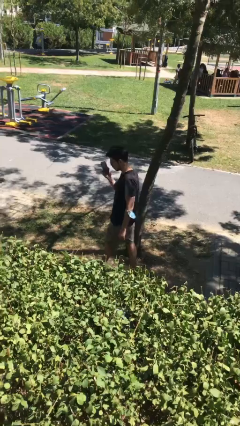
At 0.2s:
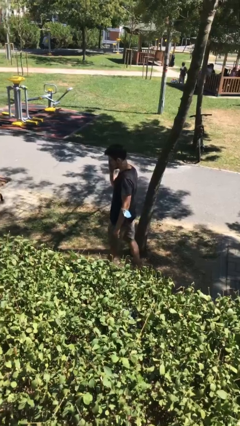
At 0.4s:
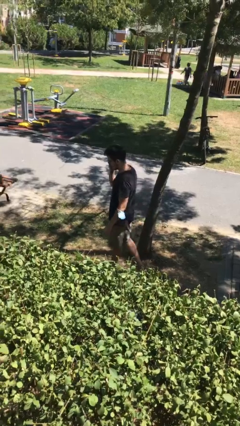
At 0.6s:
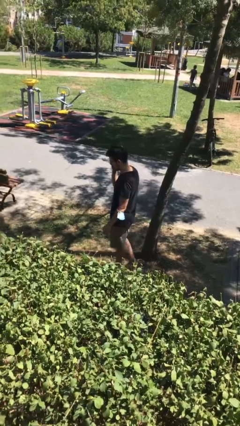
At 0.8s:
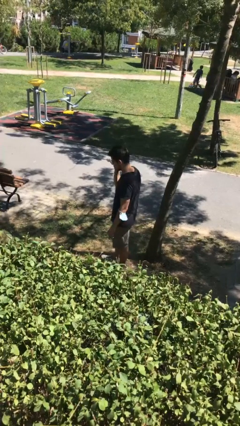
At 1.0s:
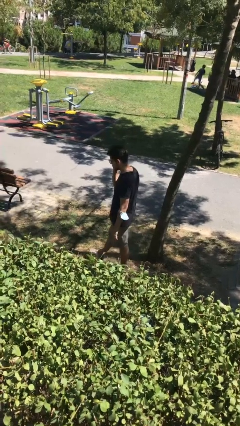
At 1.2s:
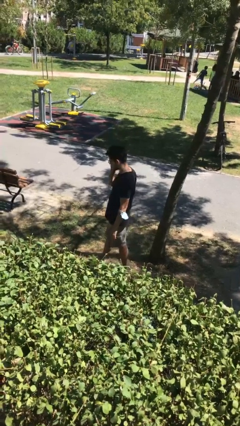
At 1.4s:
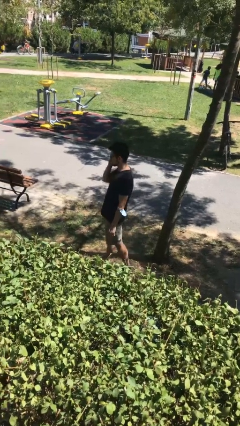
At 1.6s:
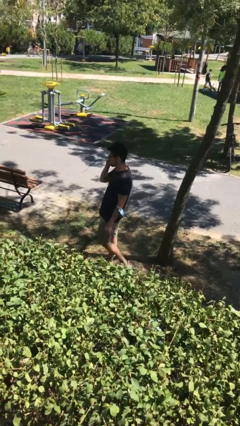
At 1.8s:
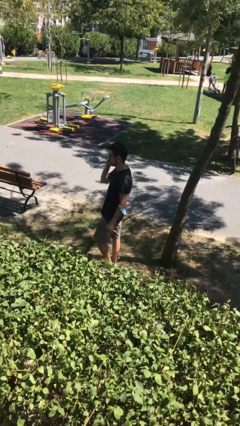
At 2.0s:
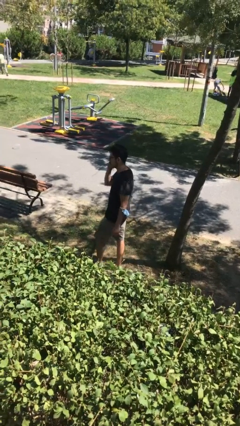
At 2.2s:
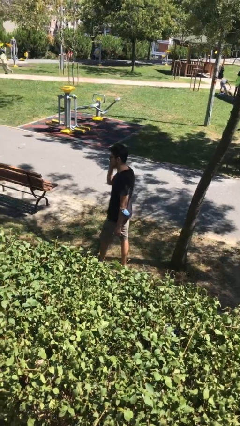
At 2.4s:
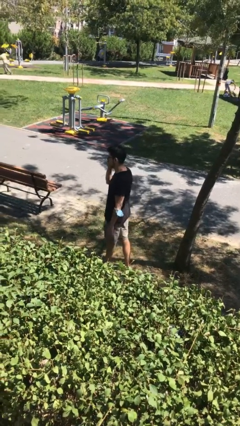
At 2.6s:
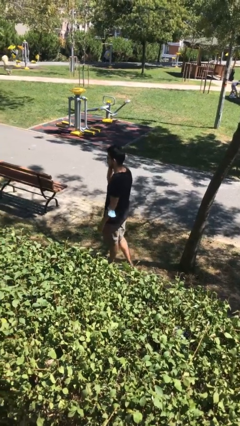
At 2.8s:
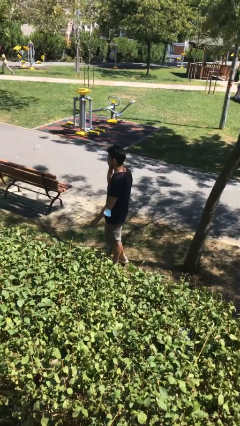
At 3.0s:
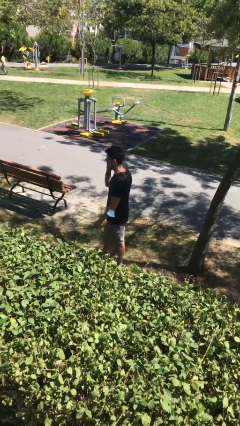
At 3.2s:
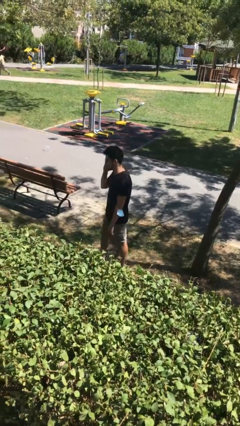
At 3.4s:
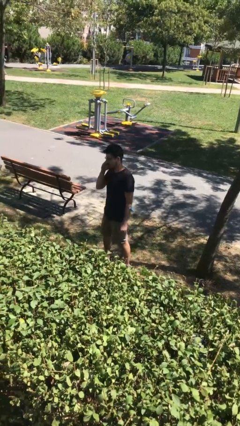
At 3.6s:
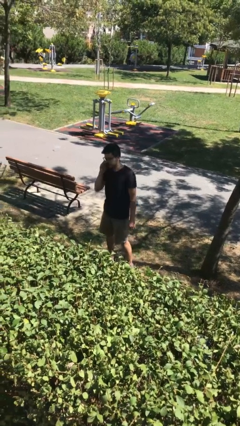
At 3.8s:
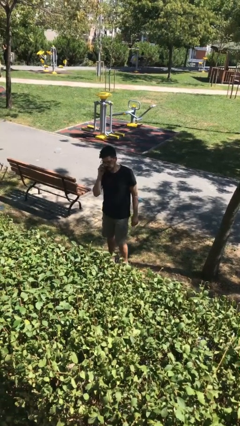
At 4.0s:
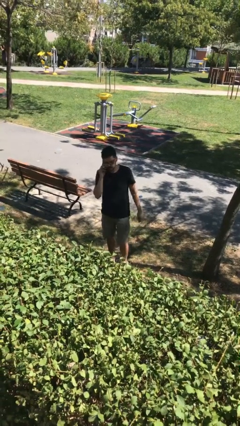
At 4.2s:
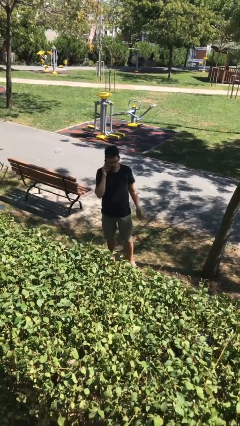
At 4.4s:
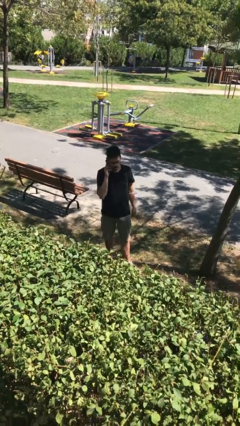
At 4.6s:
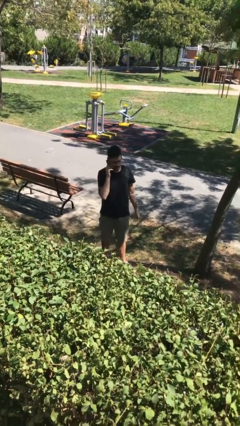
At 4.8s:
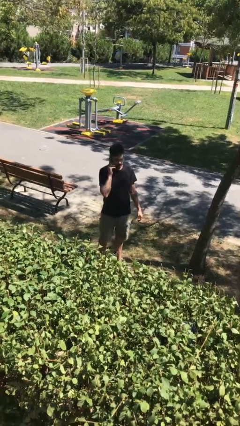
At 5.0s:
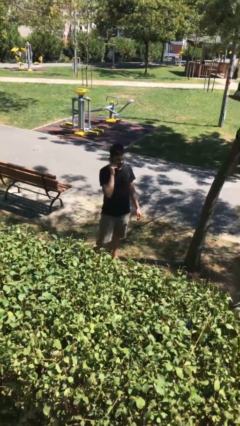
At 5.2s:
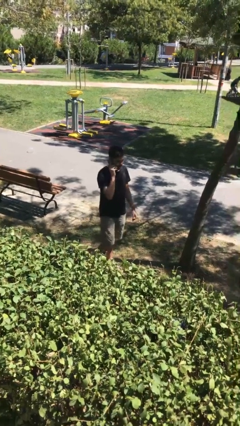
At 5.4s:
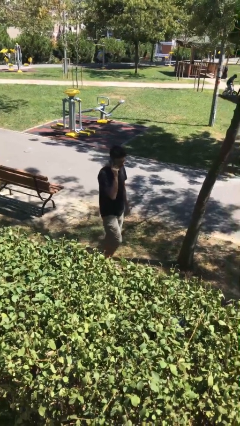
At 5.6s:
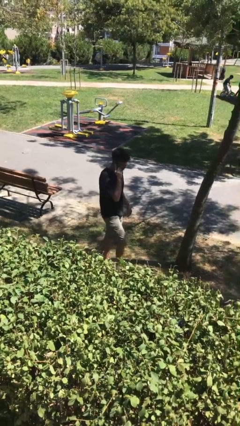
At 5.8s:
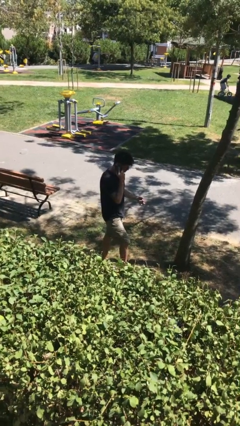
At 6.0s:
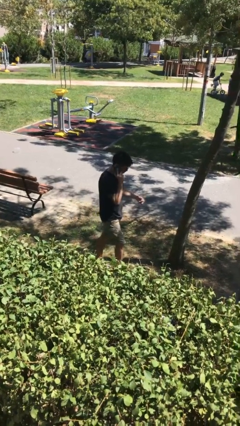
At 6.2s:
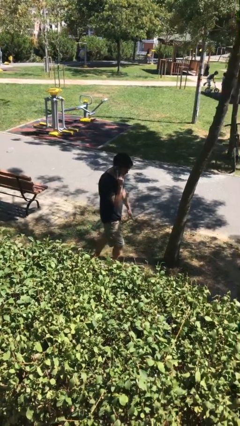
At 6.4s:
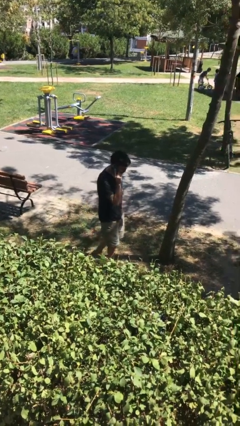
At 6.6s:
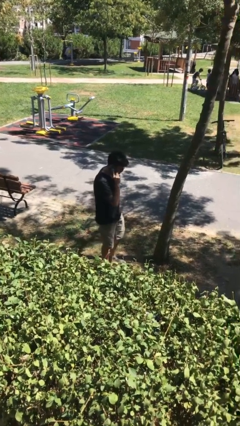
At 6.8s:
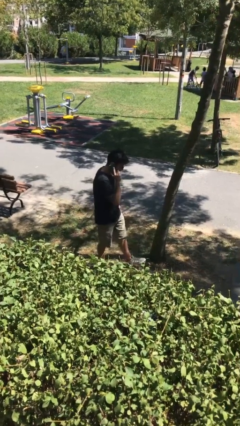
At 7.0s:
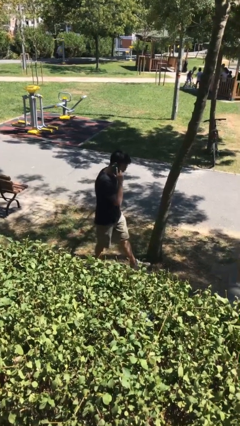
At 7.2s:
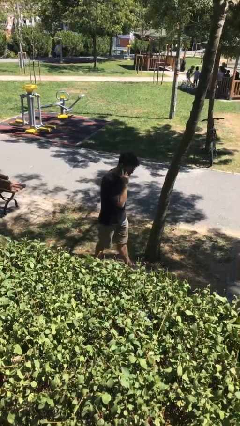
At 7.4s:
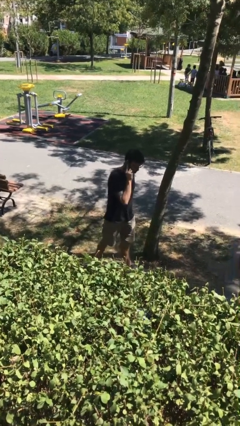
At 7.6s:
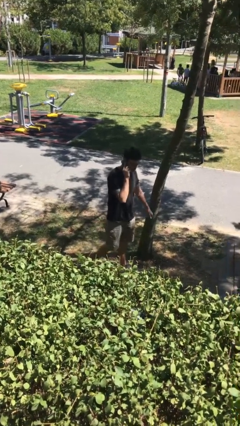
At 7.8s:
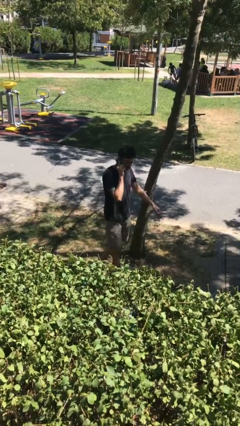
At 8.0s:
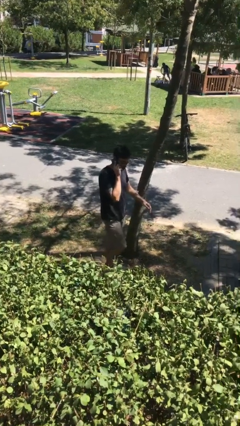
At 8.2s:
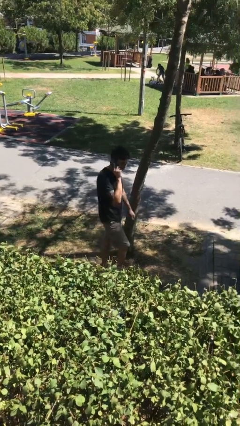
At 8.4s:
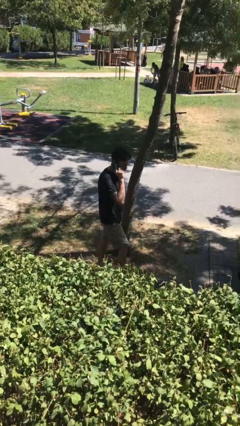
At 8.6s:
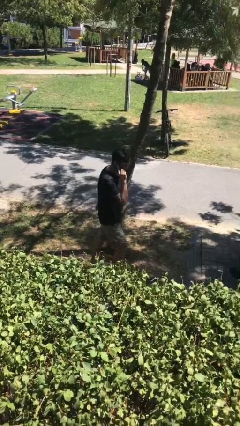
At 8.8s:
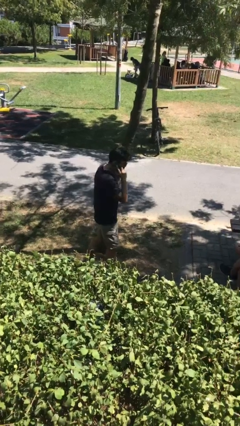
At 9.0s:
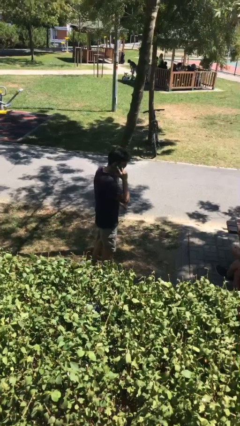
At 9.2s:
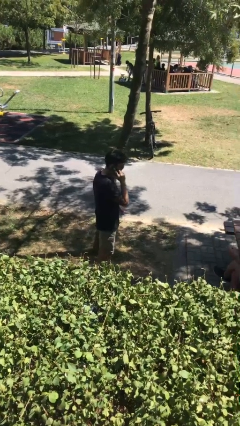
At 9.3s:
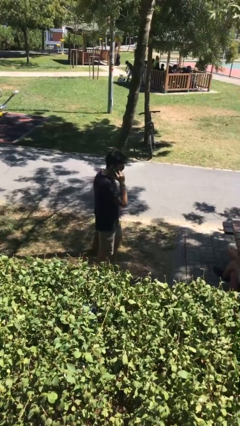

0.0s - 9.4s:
person talks on phone

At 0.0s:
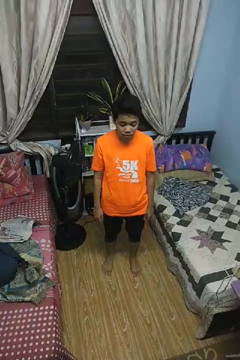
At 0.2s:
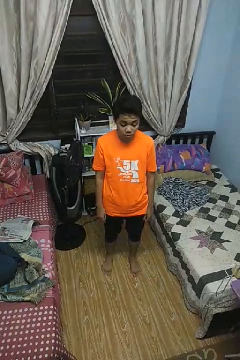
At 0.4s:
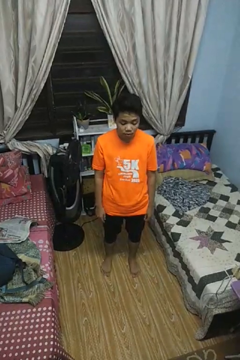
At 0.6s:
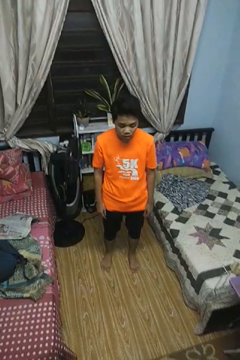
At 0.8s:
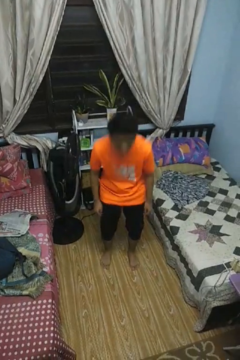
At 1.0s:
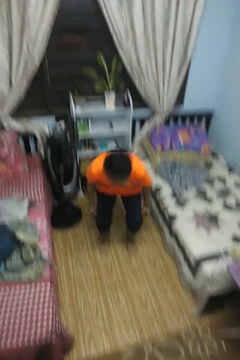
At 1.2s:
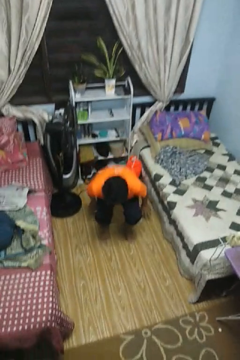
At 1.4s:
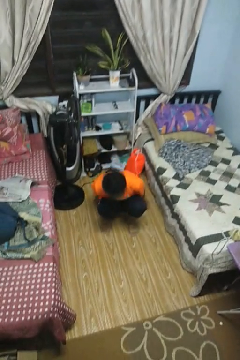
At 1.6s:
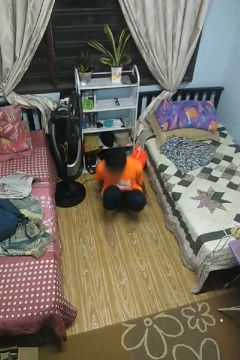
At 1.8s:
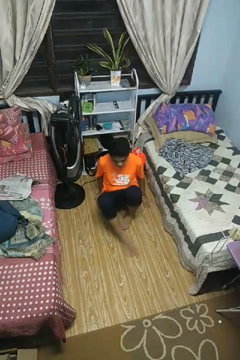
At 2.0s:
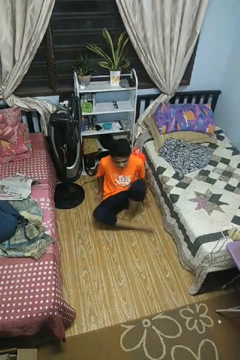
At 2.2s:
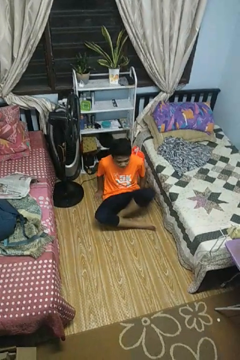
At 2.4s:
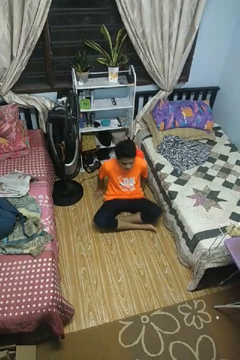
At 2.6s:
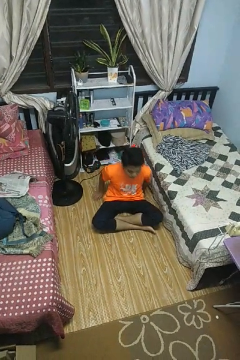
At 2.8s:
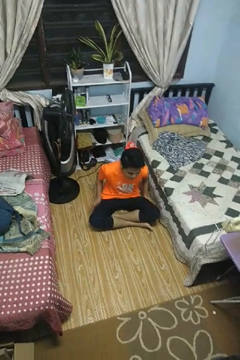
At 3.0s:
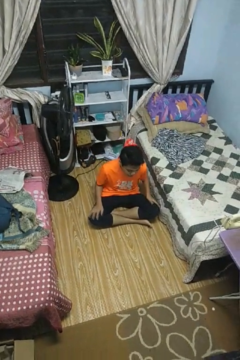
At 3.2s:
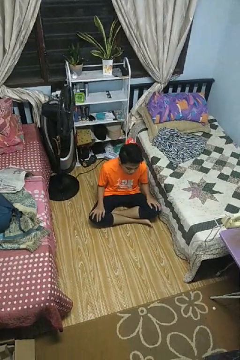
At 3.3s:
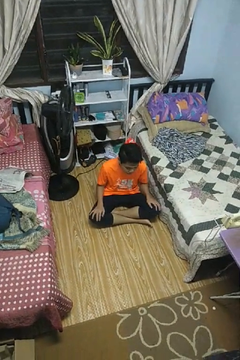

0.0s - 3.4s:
person sits crisscross

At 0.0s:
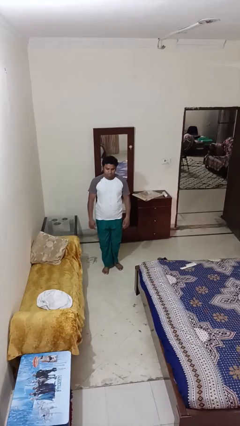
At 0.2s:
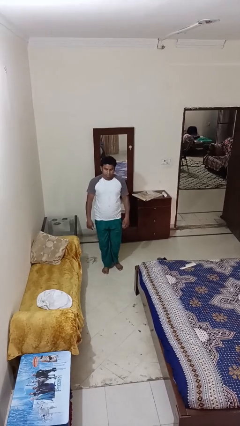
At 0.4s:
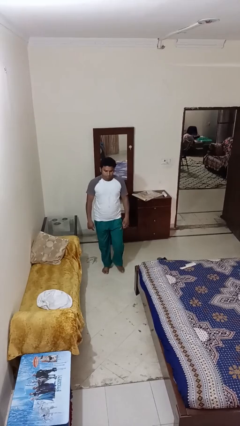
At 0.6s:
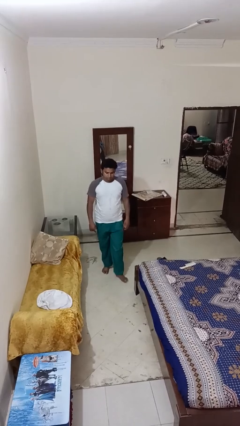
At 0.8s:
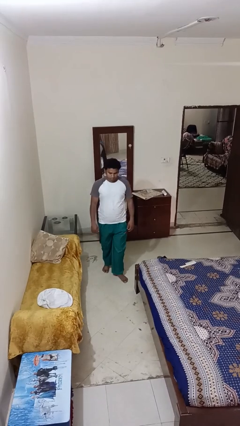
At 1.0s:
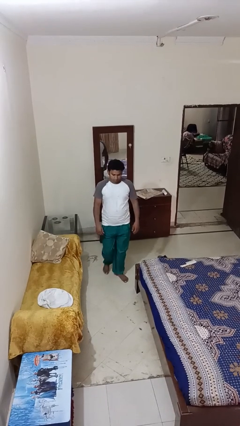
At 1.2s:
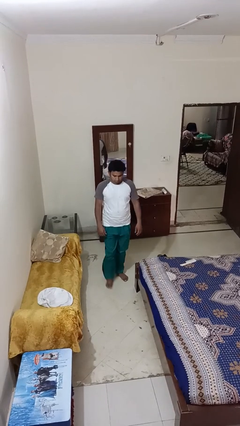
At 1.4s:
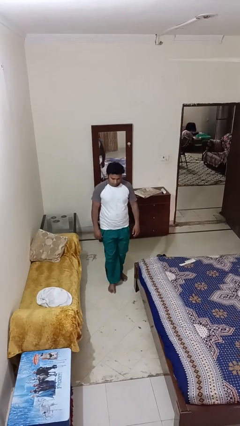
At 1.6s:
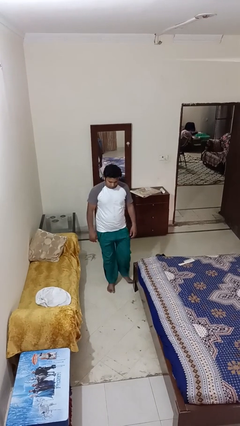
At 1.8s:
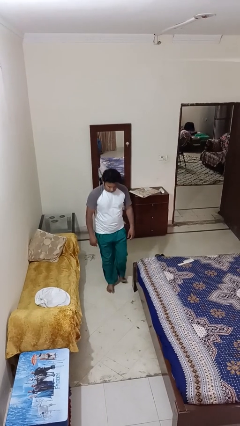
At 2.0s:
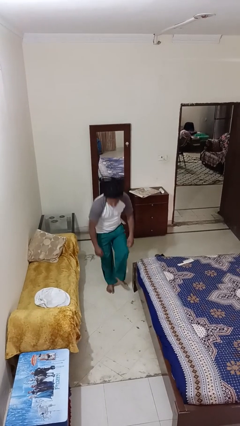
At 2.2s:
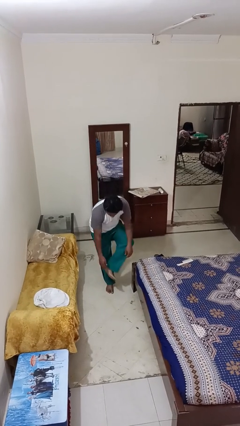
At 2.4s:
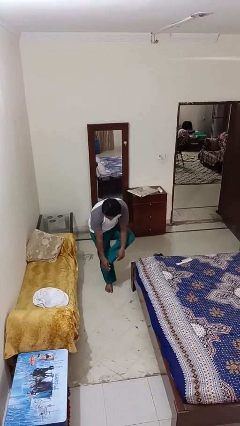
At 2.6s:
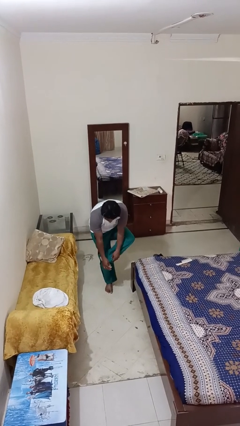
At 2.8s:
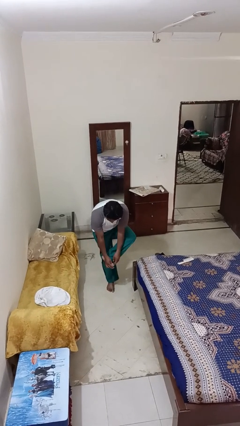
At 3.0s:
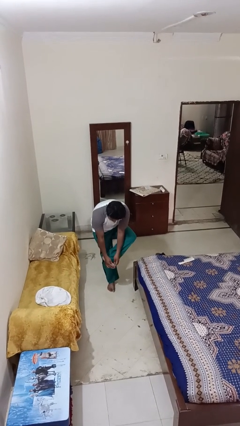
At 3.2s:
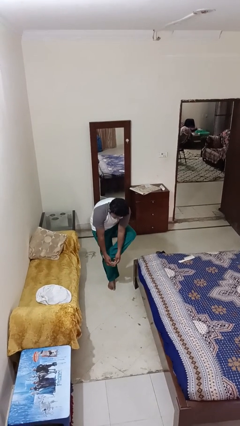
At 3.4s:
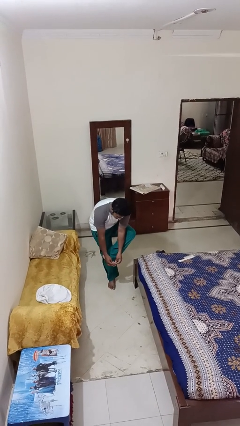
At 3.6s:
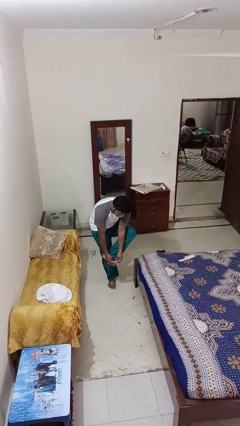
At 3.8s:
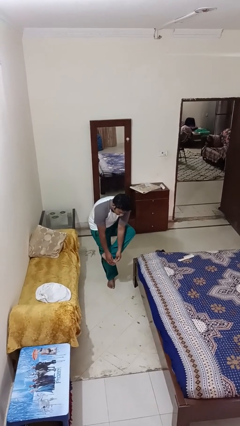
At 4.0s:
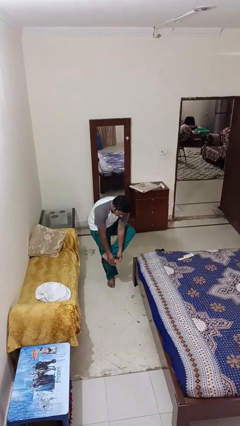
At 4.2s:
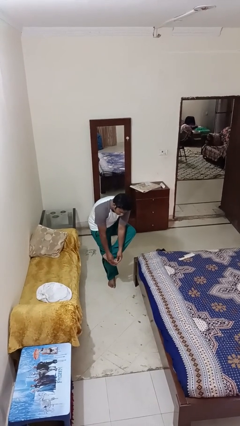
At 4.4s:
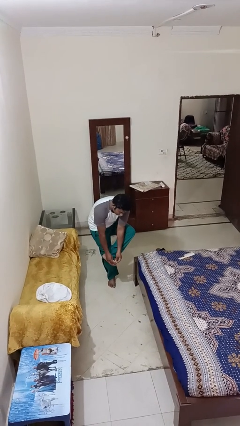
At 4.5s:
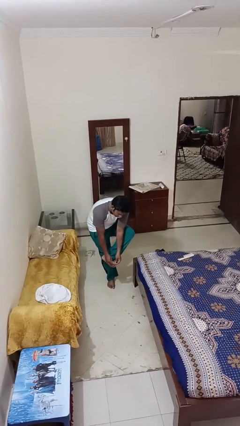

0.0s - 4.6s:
person stubs toe

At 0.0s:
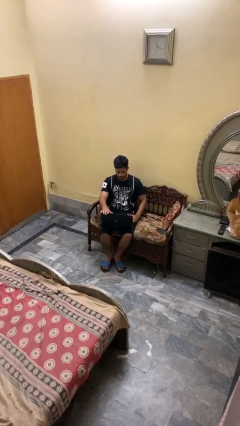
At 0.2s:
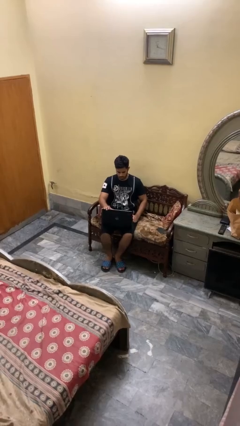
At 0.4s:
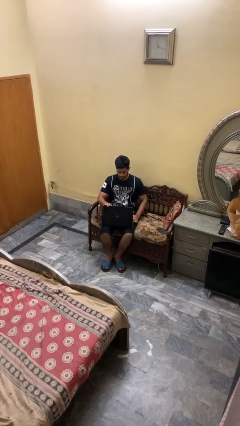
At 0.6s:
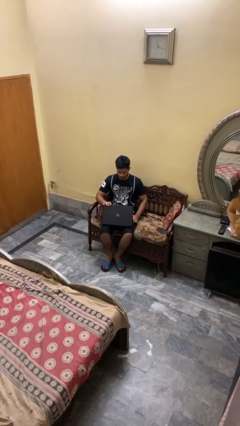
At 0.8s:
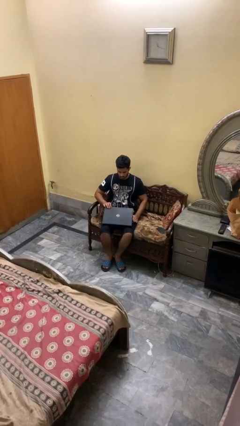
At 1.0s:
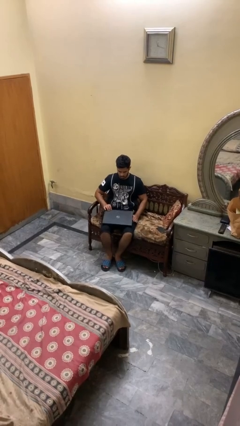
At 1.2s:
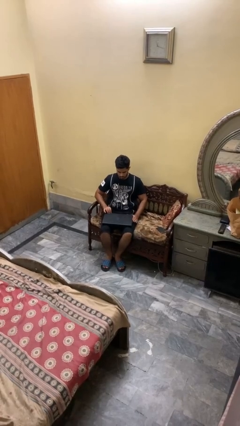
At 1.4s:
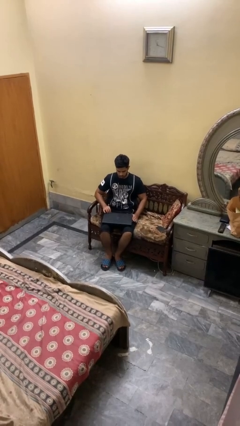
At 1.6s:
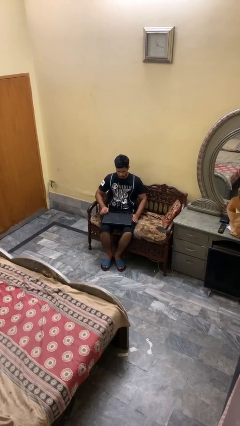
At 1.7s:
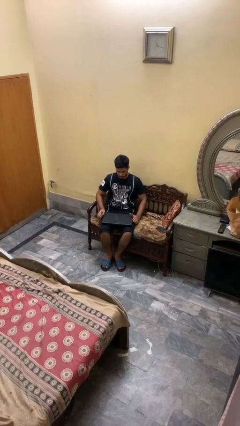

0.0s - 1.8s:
person closes laptop
